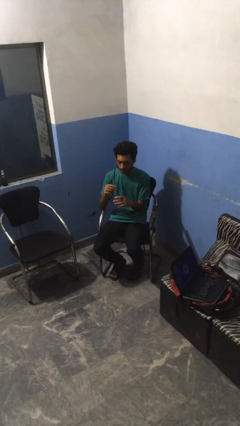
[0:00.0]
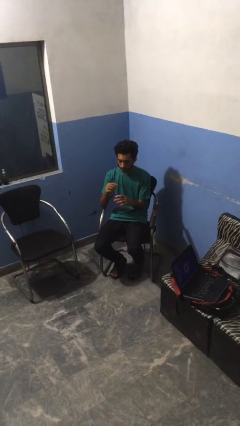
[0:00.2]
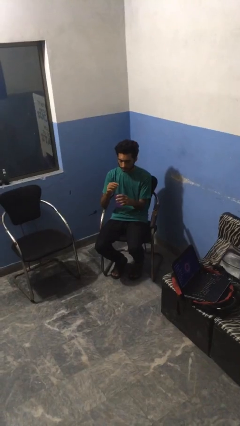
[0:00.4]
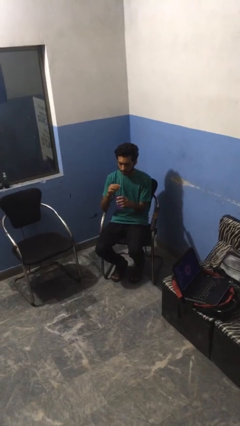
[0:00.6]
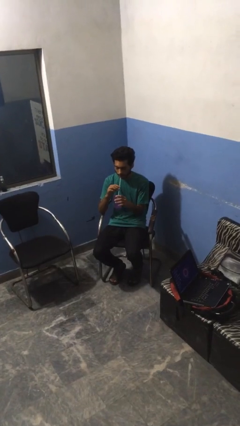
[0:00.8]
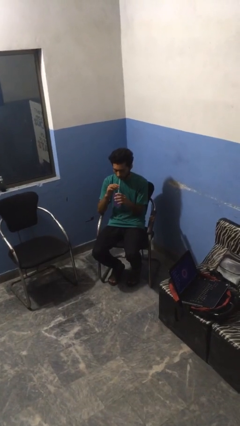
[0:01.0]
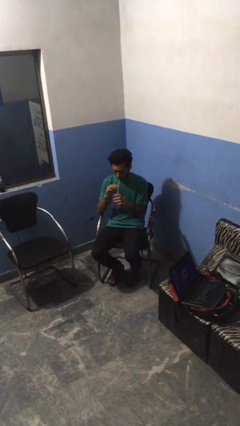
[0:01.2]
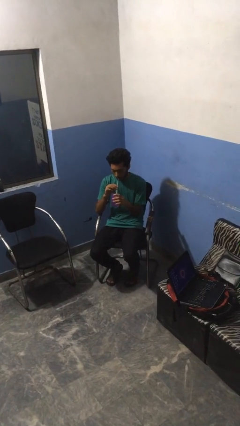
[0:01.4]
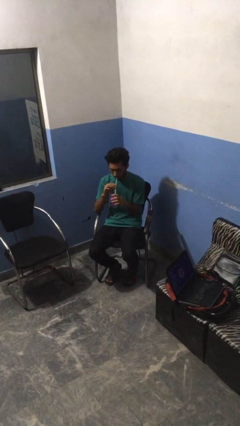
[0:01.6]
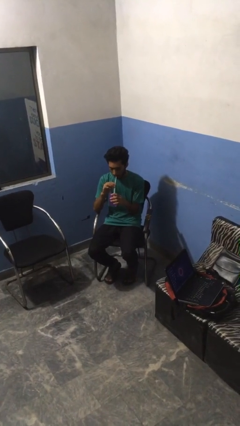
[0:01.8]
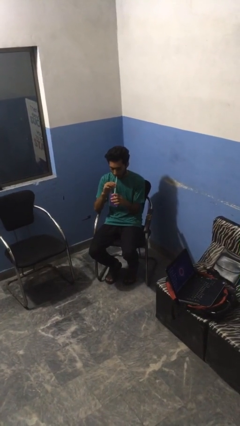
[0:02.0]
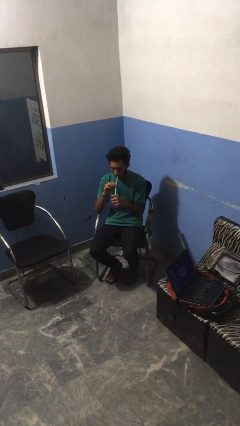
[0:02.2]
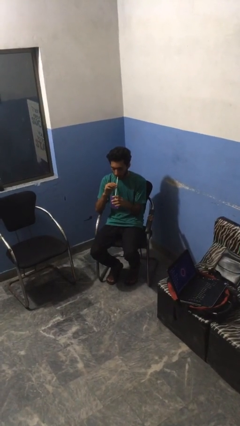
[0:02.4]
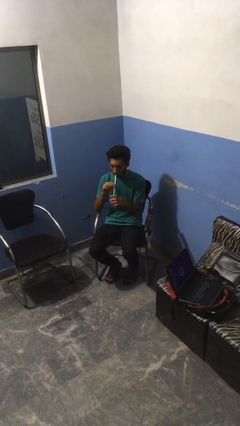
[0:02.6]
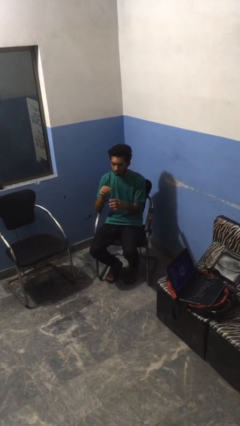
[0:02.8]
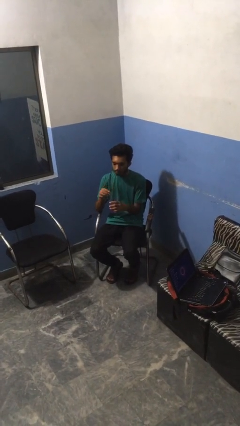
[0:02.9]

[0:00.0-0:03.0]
person drinks from straw

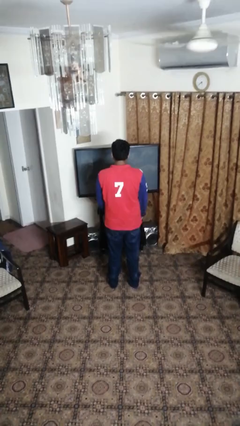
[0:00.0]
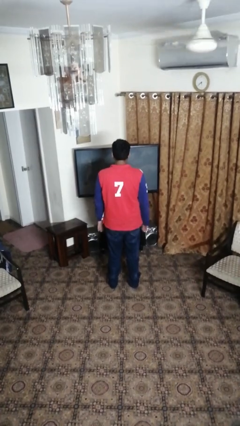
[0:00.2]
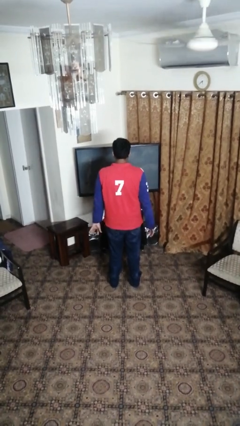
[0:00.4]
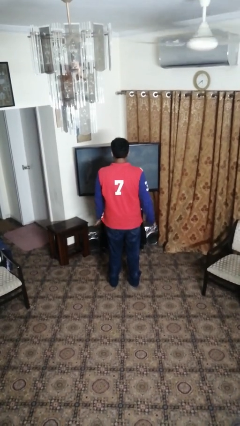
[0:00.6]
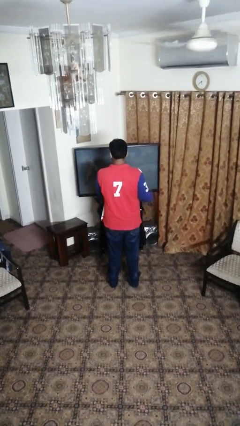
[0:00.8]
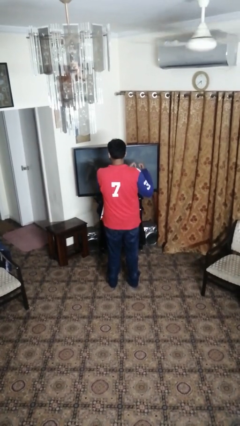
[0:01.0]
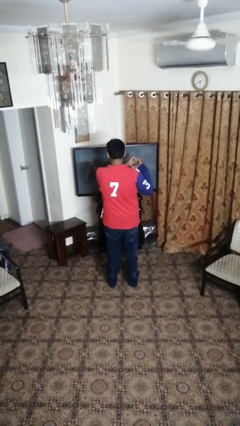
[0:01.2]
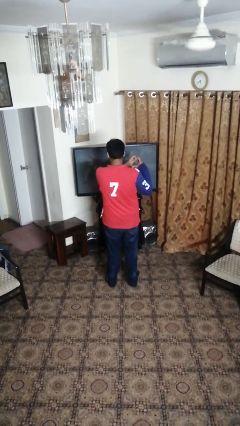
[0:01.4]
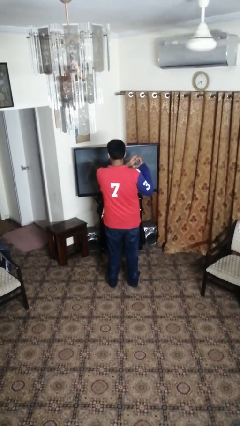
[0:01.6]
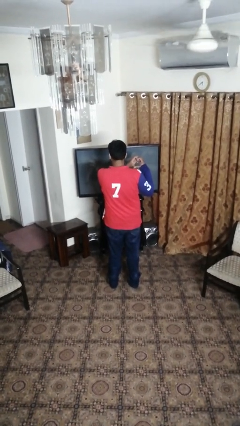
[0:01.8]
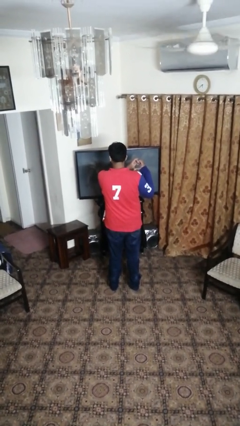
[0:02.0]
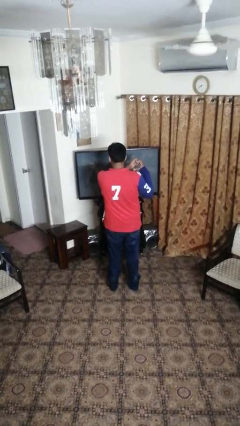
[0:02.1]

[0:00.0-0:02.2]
person gestures heart

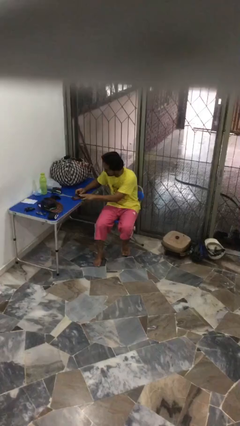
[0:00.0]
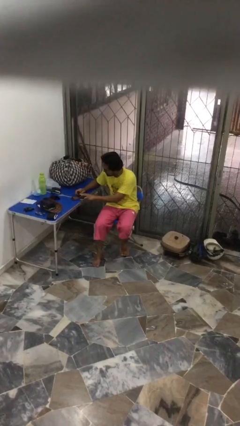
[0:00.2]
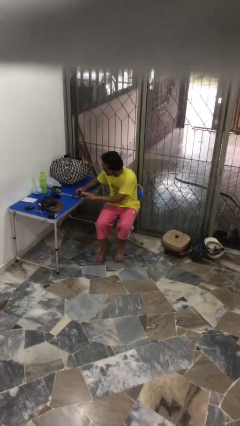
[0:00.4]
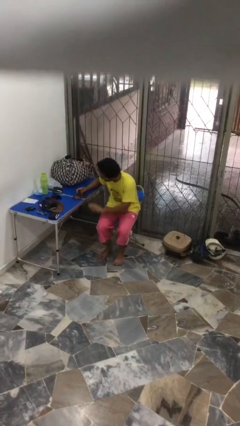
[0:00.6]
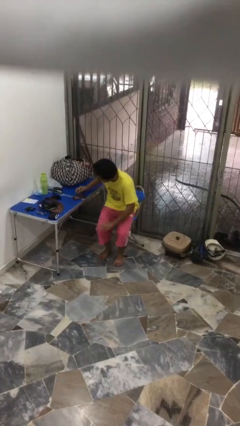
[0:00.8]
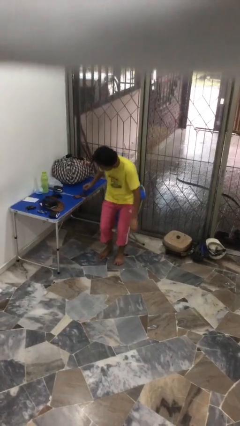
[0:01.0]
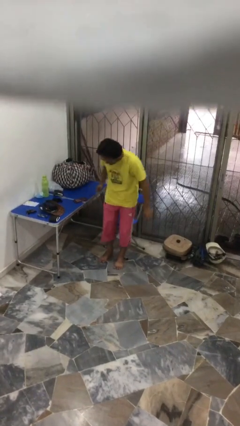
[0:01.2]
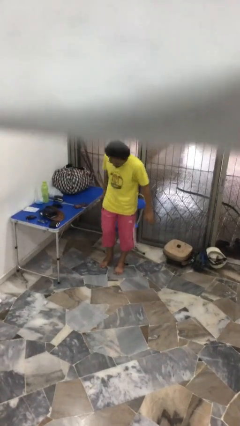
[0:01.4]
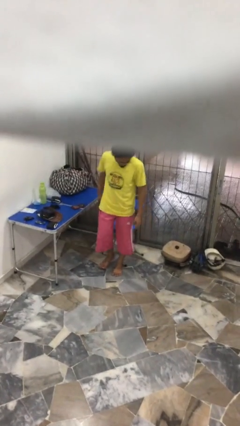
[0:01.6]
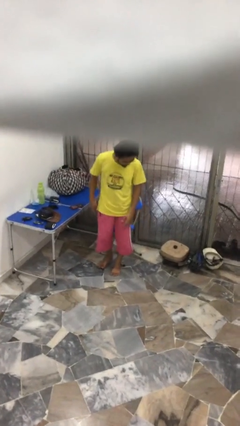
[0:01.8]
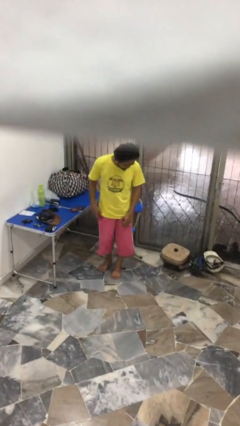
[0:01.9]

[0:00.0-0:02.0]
person stands up

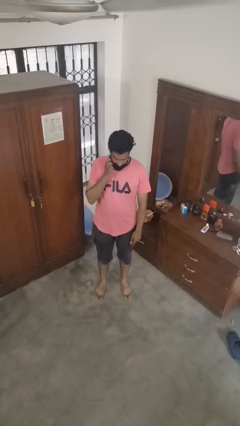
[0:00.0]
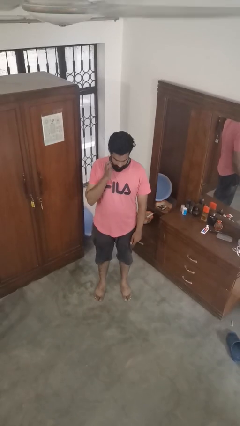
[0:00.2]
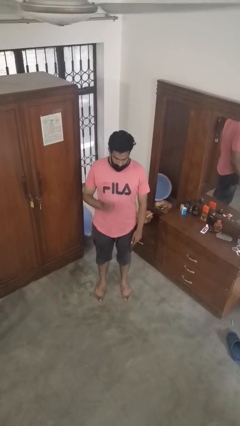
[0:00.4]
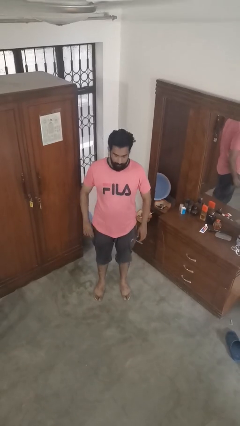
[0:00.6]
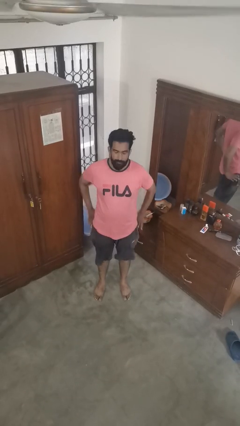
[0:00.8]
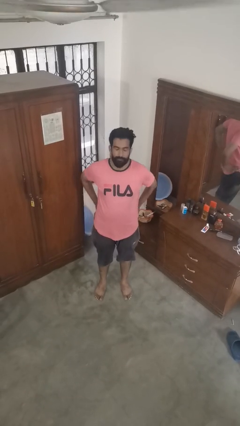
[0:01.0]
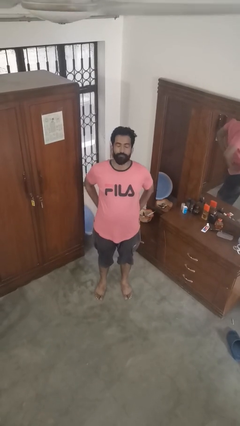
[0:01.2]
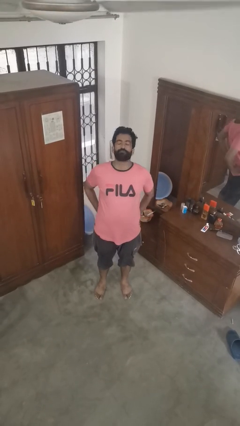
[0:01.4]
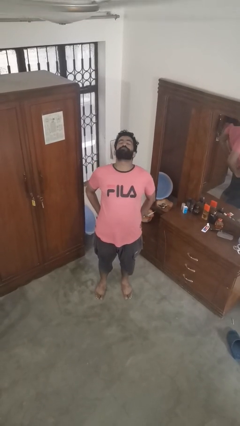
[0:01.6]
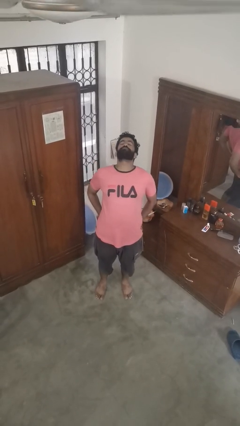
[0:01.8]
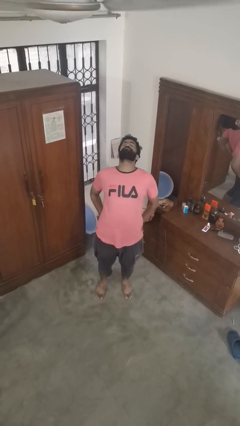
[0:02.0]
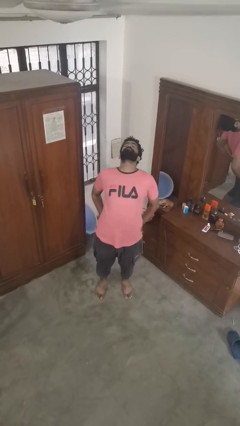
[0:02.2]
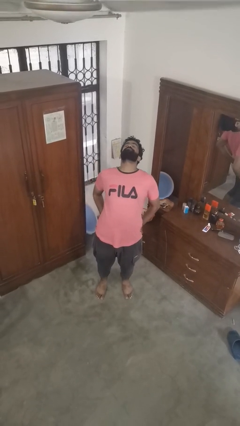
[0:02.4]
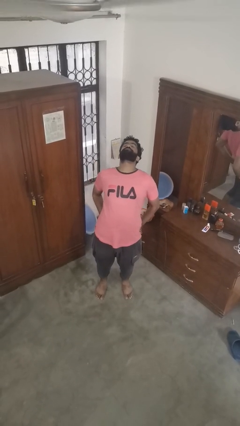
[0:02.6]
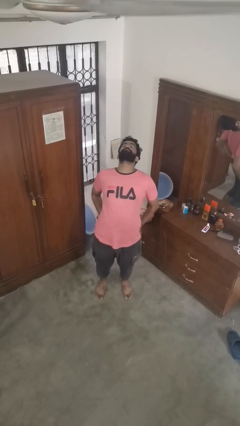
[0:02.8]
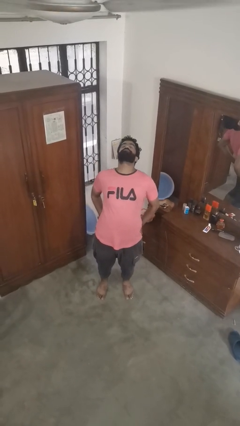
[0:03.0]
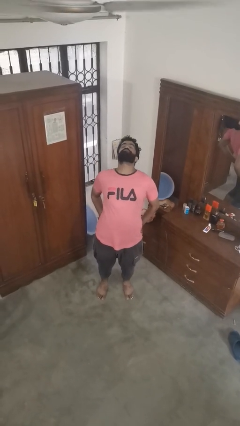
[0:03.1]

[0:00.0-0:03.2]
person stretches back

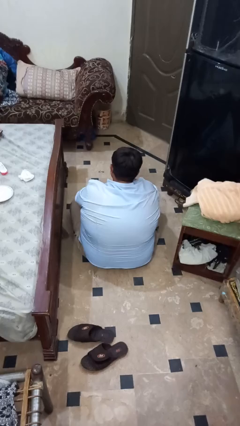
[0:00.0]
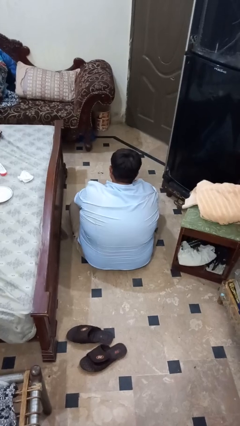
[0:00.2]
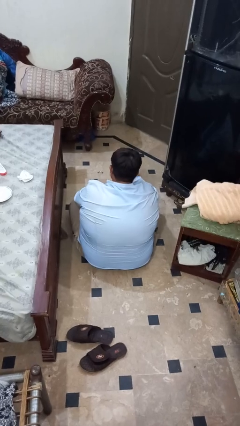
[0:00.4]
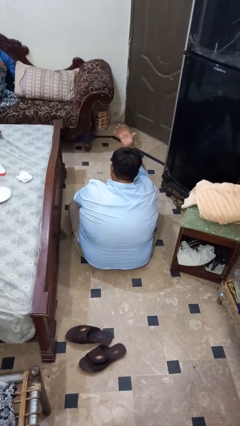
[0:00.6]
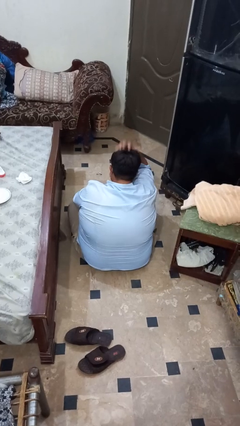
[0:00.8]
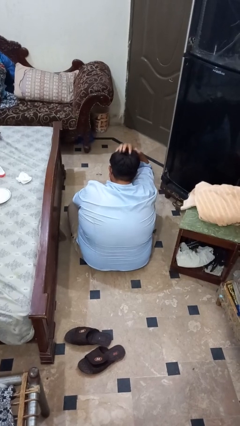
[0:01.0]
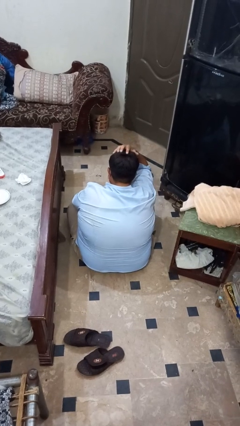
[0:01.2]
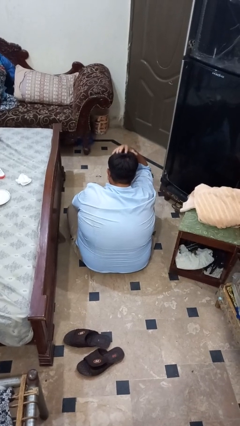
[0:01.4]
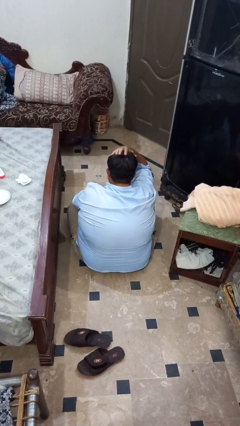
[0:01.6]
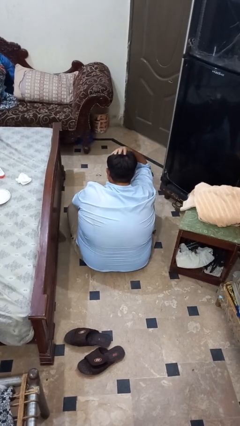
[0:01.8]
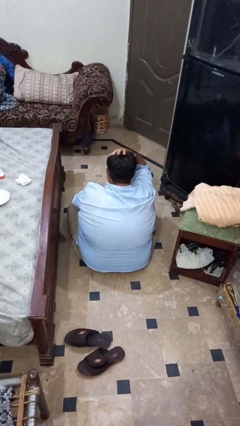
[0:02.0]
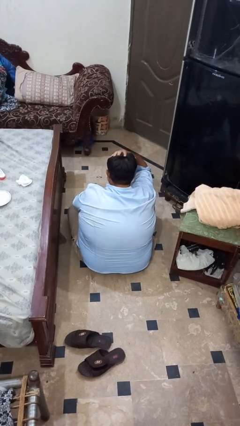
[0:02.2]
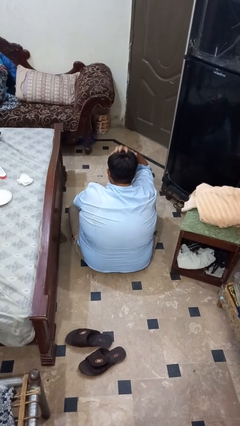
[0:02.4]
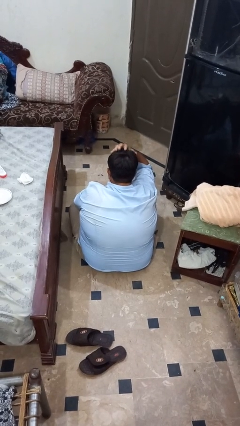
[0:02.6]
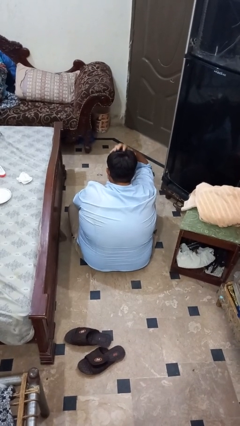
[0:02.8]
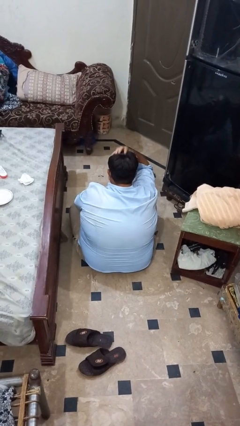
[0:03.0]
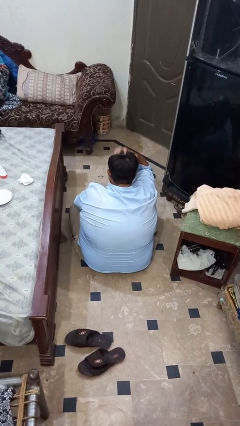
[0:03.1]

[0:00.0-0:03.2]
person pats head

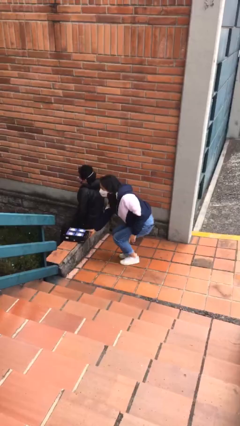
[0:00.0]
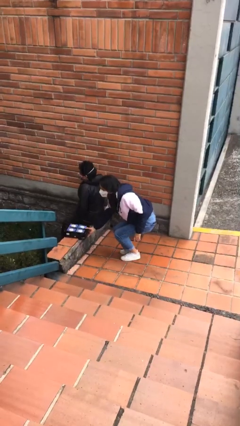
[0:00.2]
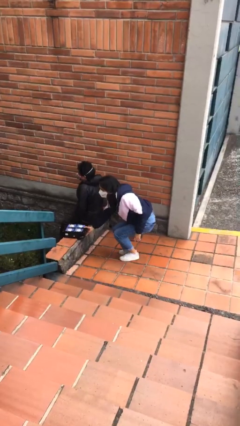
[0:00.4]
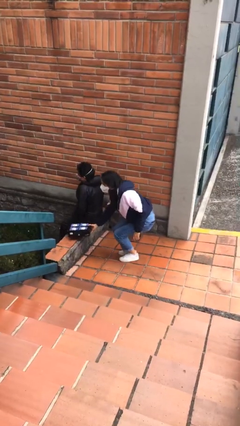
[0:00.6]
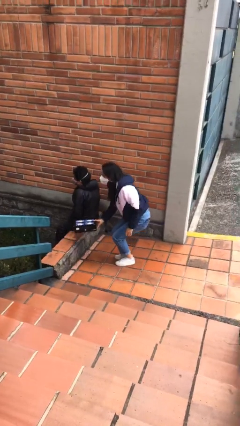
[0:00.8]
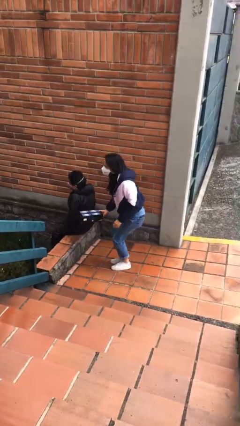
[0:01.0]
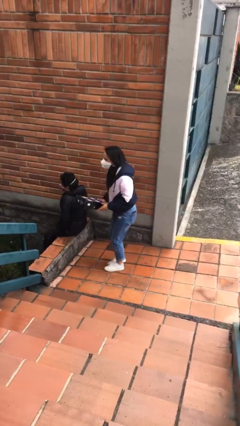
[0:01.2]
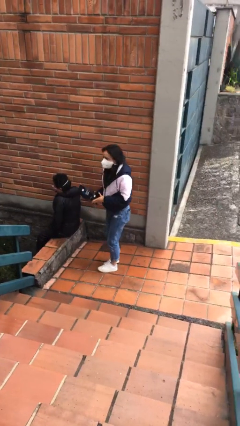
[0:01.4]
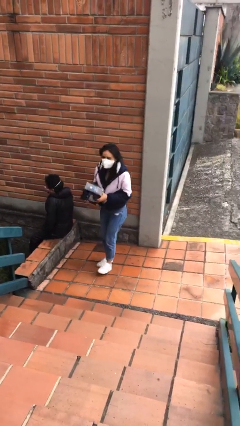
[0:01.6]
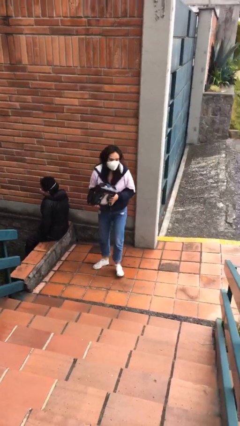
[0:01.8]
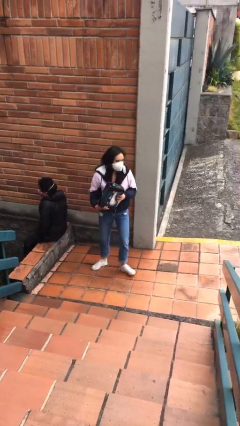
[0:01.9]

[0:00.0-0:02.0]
person steals object from person

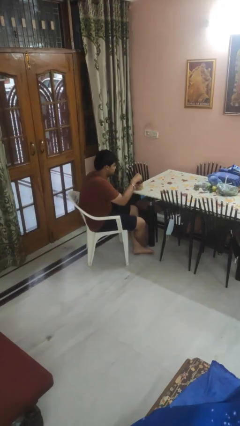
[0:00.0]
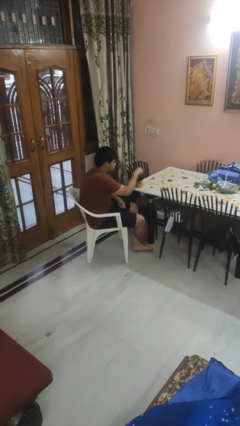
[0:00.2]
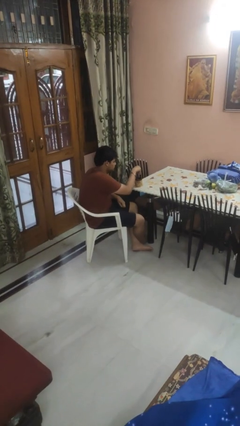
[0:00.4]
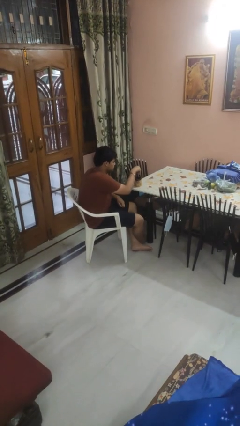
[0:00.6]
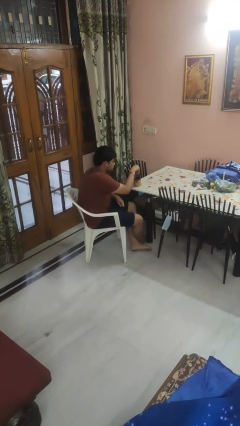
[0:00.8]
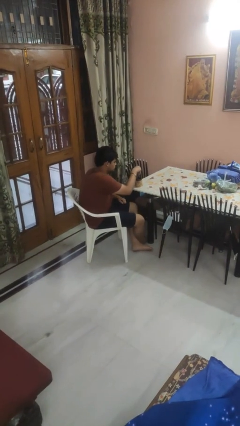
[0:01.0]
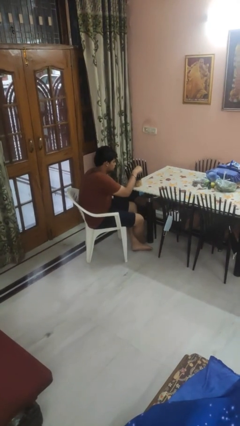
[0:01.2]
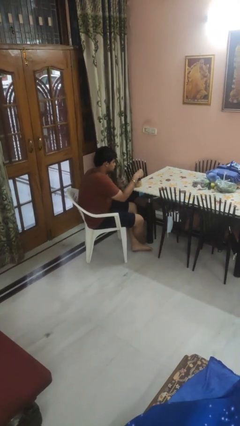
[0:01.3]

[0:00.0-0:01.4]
person stirs mug
